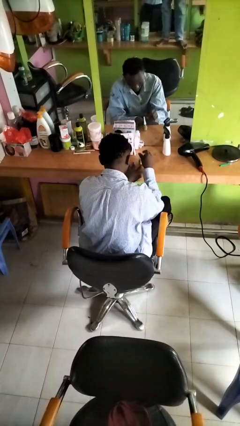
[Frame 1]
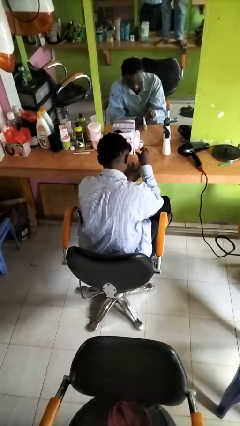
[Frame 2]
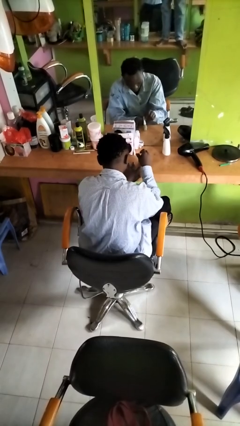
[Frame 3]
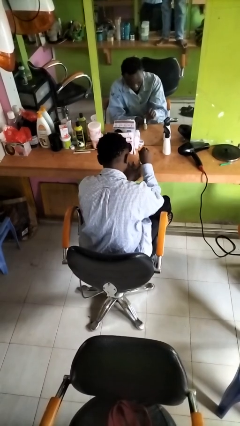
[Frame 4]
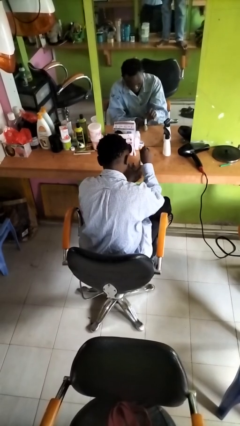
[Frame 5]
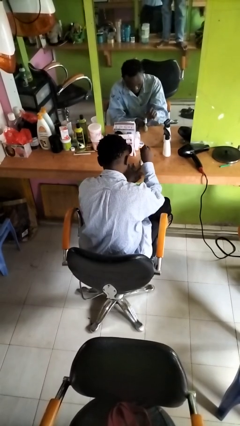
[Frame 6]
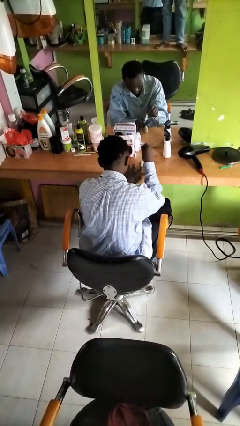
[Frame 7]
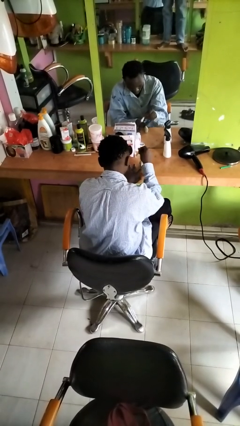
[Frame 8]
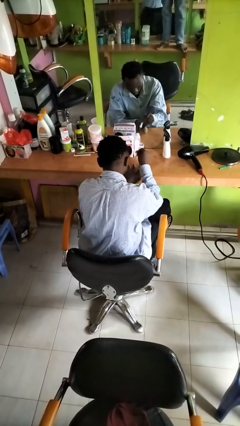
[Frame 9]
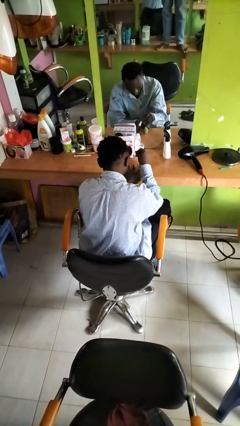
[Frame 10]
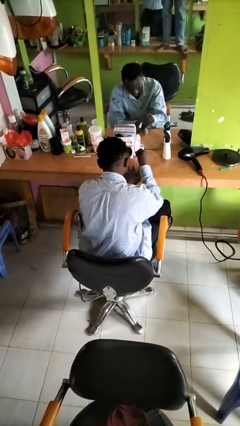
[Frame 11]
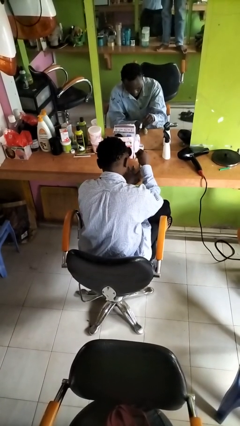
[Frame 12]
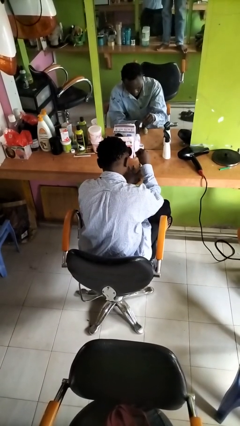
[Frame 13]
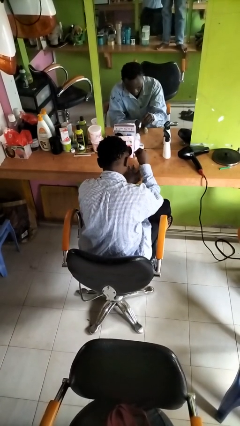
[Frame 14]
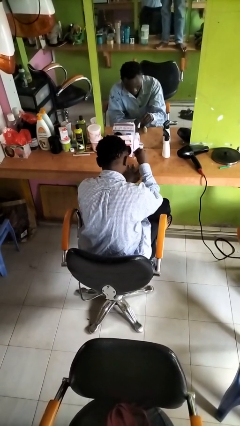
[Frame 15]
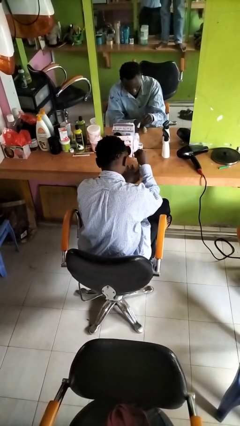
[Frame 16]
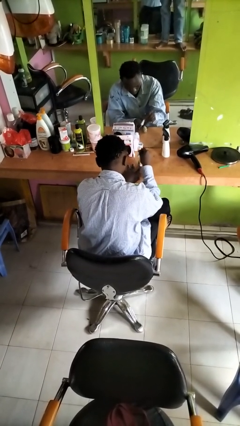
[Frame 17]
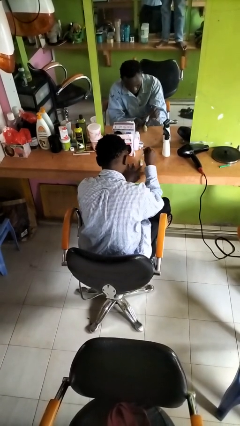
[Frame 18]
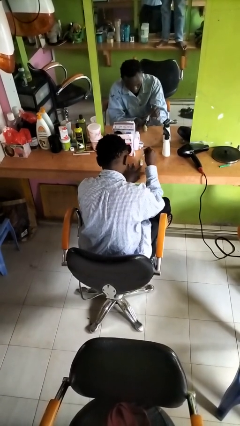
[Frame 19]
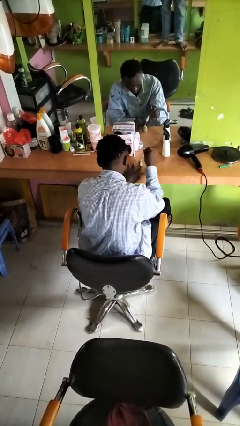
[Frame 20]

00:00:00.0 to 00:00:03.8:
person paints fingernails

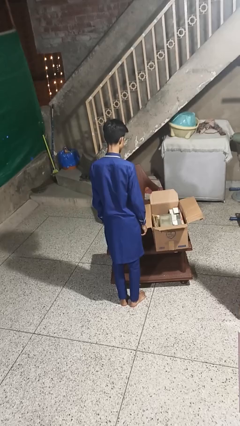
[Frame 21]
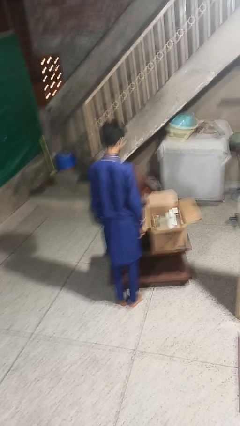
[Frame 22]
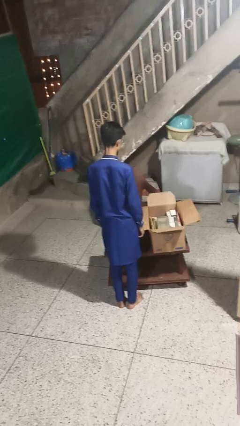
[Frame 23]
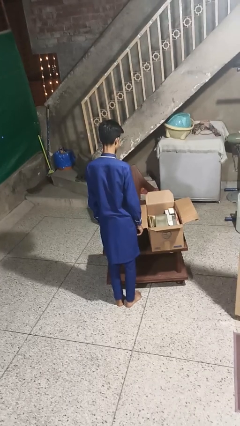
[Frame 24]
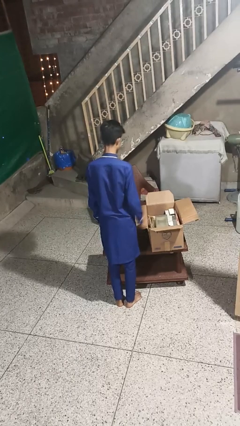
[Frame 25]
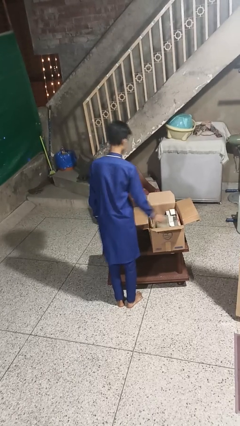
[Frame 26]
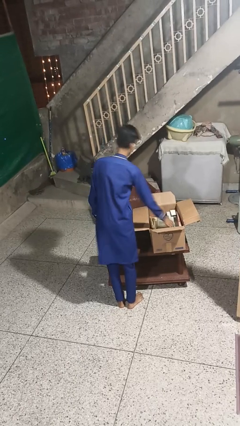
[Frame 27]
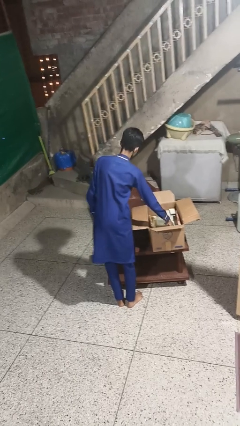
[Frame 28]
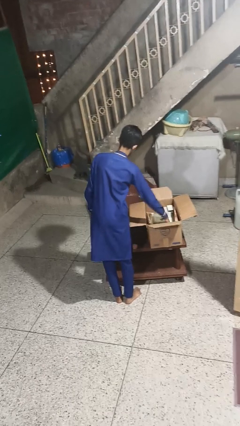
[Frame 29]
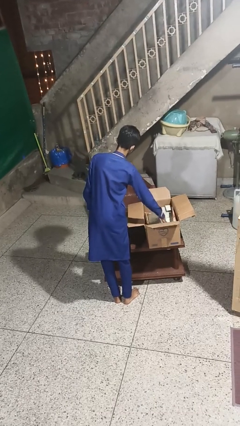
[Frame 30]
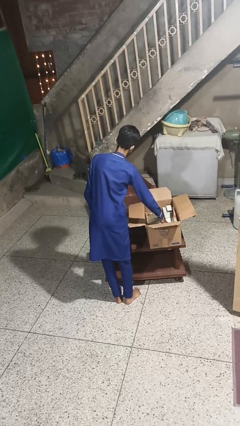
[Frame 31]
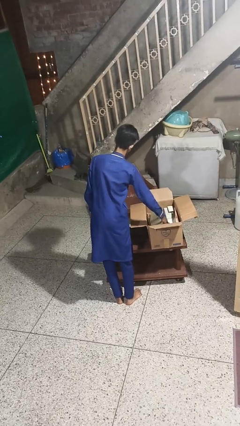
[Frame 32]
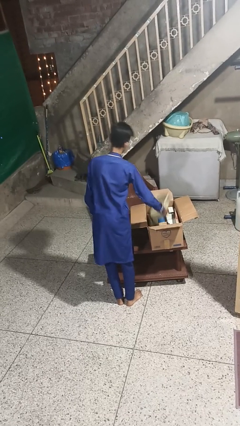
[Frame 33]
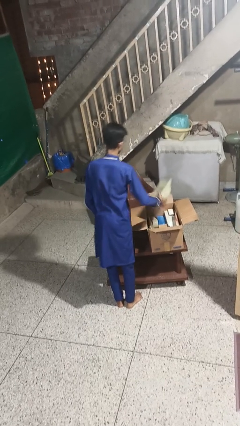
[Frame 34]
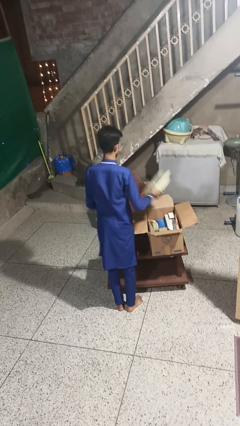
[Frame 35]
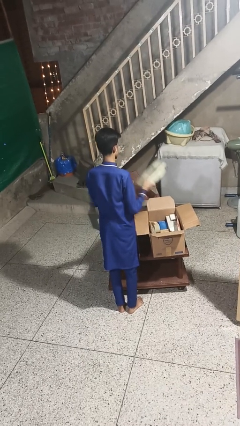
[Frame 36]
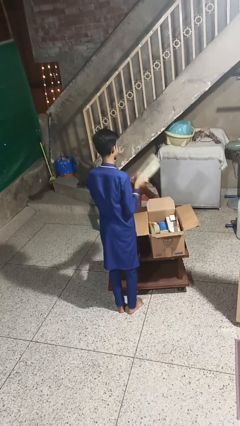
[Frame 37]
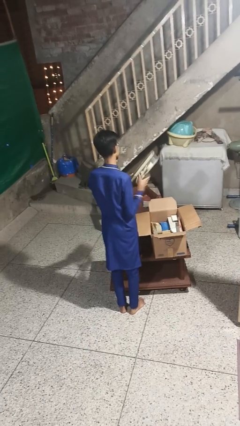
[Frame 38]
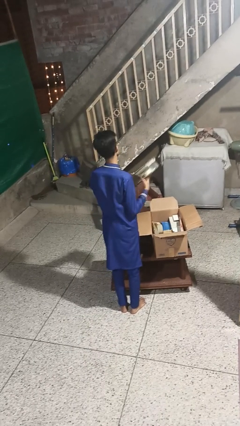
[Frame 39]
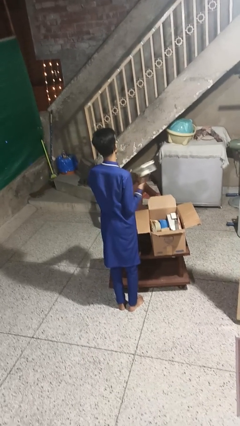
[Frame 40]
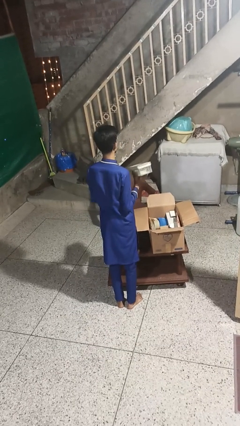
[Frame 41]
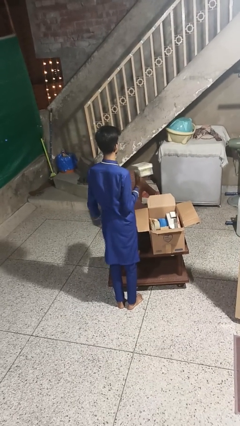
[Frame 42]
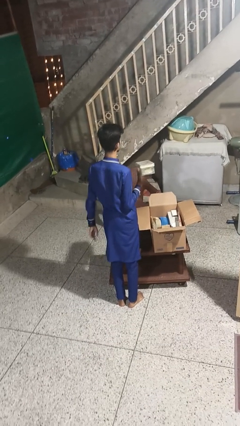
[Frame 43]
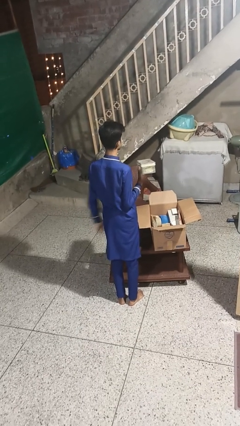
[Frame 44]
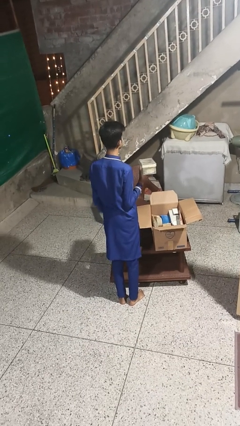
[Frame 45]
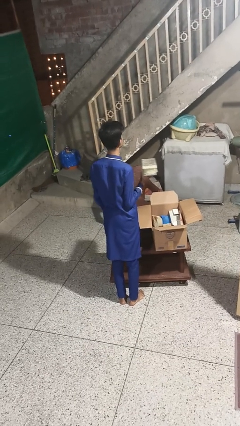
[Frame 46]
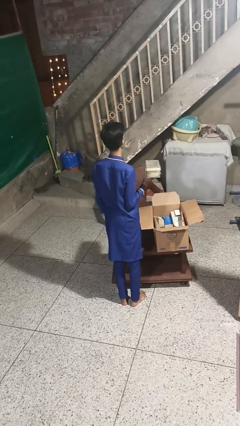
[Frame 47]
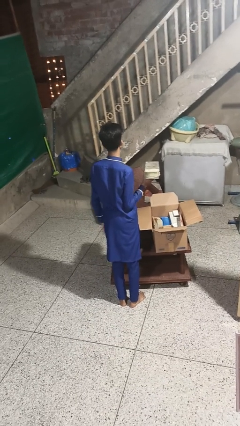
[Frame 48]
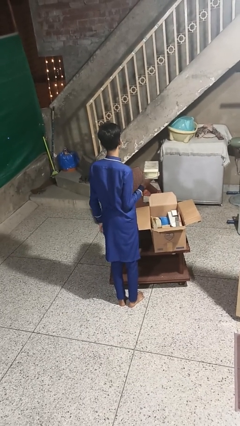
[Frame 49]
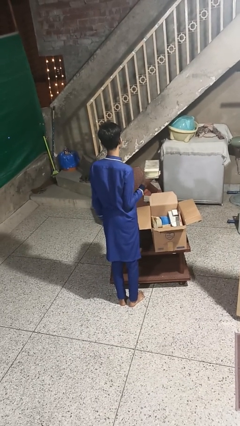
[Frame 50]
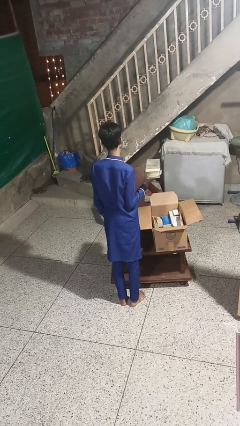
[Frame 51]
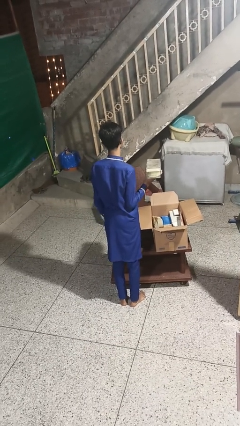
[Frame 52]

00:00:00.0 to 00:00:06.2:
person takes object from box

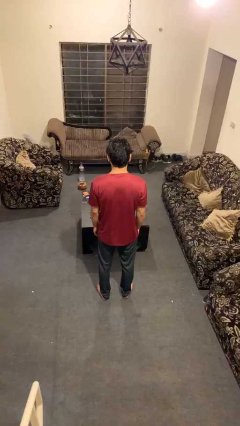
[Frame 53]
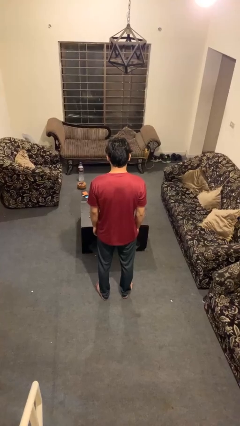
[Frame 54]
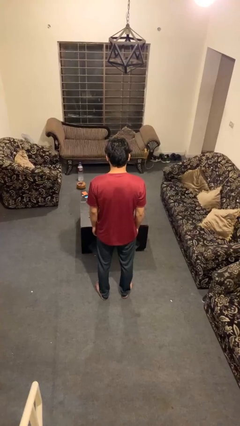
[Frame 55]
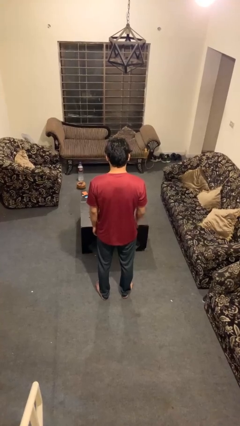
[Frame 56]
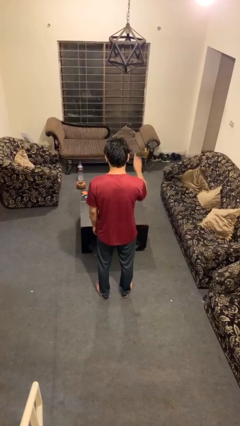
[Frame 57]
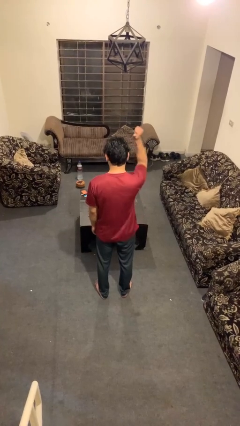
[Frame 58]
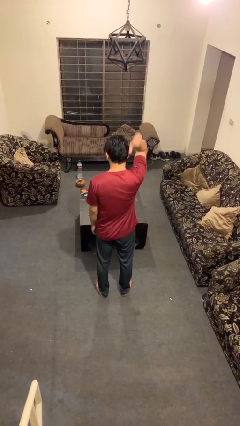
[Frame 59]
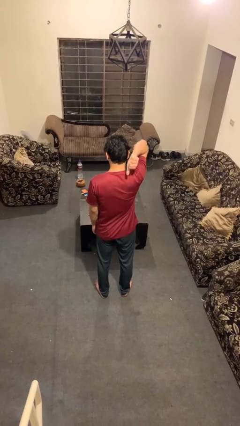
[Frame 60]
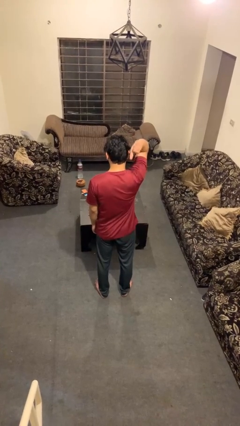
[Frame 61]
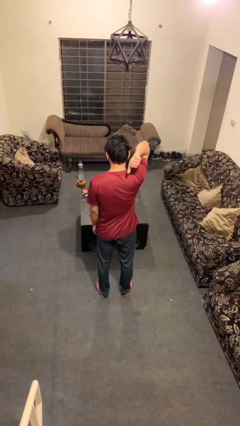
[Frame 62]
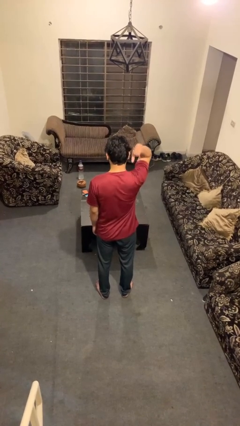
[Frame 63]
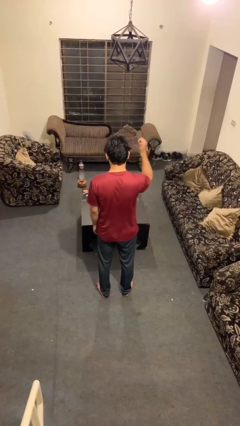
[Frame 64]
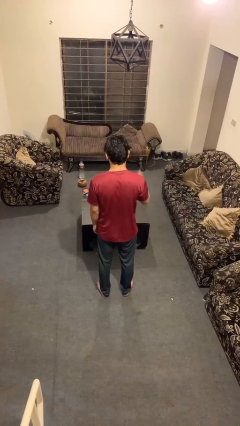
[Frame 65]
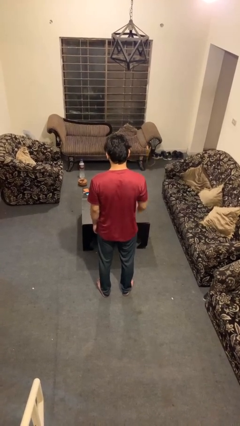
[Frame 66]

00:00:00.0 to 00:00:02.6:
person gestures behind me

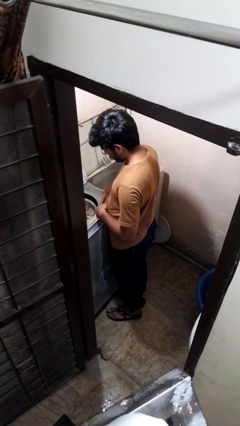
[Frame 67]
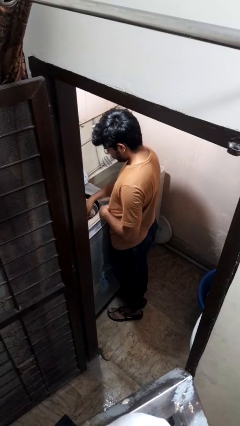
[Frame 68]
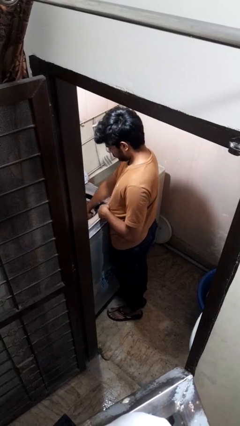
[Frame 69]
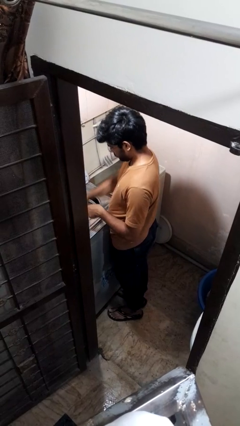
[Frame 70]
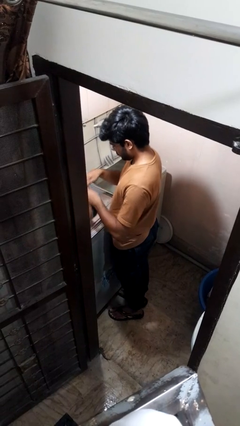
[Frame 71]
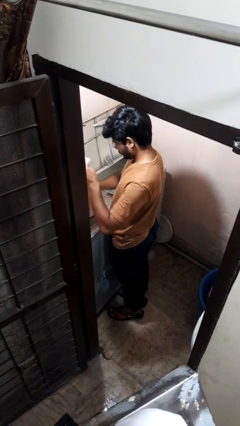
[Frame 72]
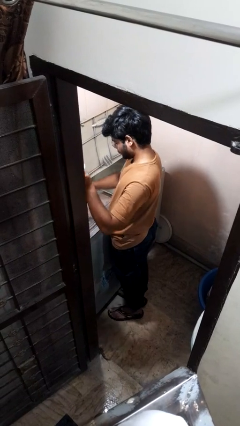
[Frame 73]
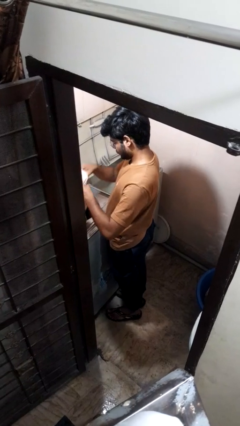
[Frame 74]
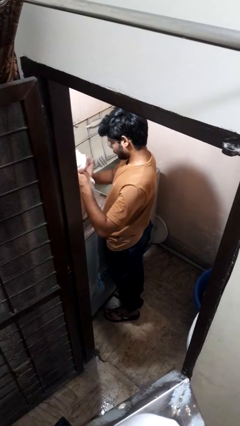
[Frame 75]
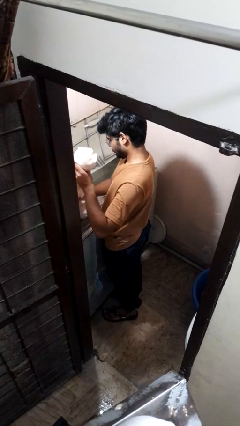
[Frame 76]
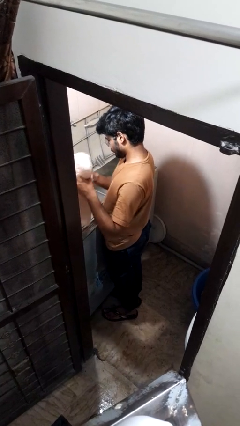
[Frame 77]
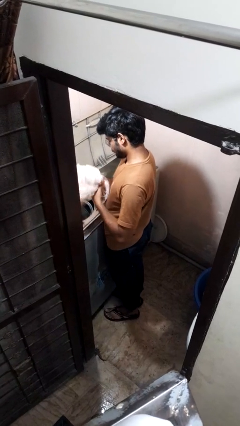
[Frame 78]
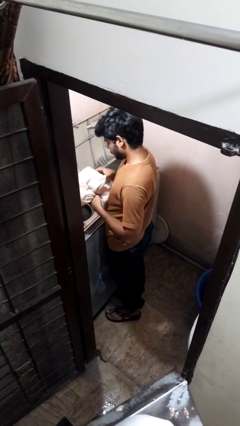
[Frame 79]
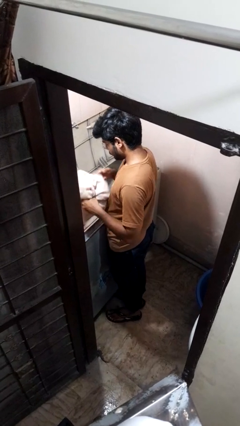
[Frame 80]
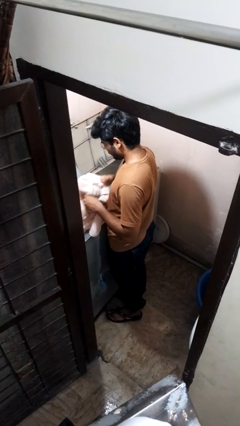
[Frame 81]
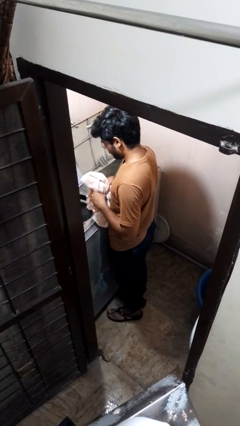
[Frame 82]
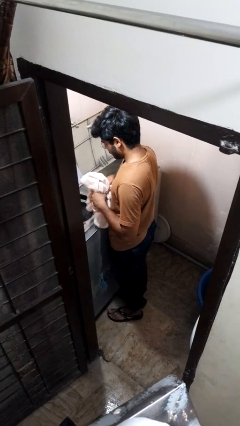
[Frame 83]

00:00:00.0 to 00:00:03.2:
person unloads dryer

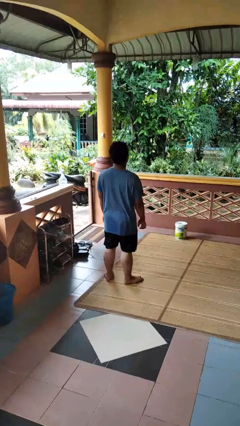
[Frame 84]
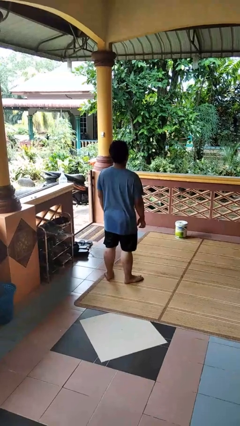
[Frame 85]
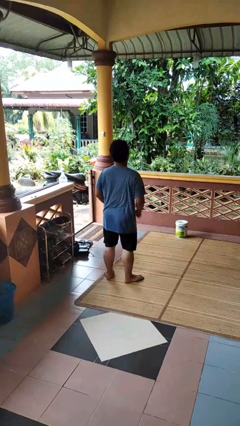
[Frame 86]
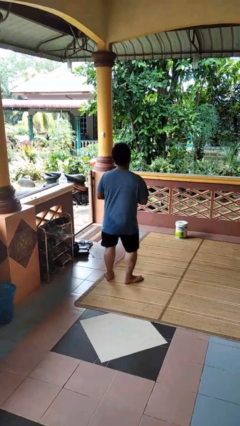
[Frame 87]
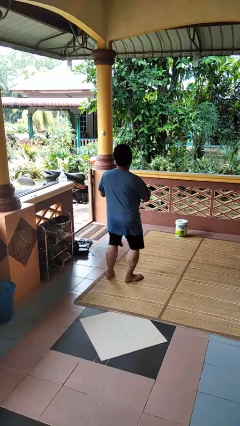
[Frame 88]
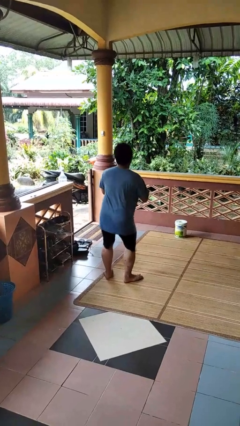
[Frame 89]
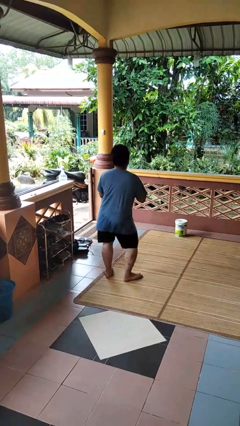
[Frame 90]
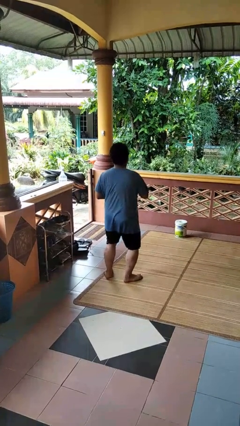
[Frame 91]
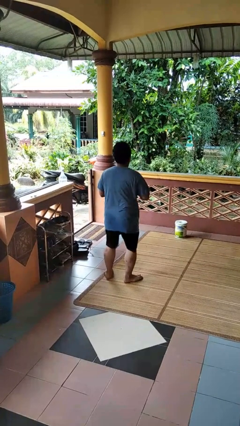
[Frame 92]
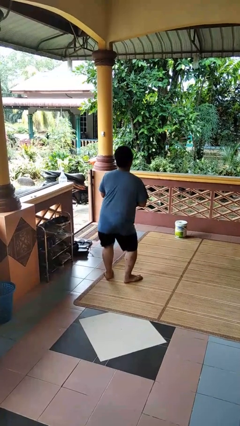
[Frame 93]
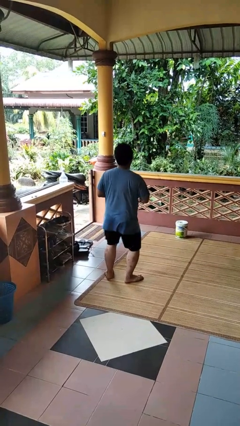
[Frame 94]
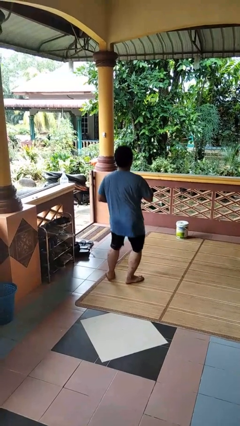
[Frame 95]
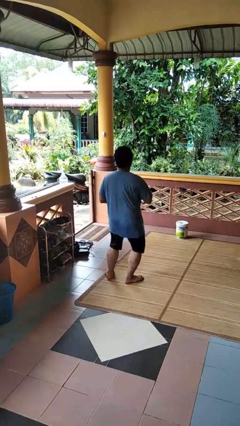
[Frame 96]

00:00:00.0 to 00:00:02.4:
person dances in place
